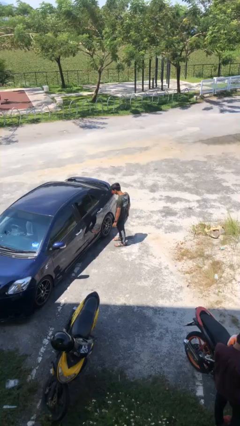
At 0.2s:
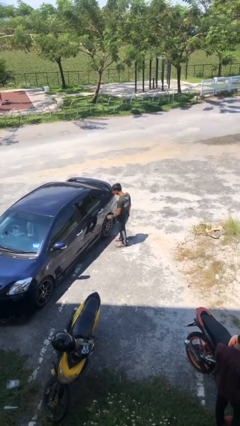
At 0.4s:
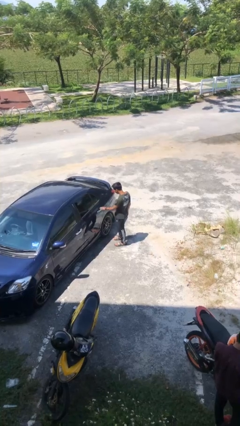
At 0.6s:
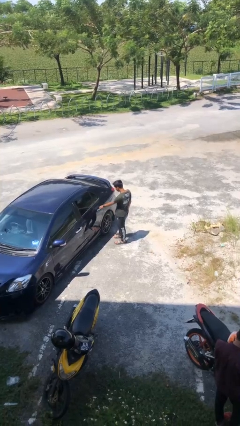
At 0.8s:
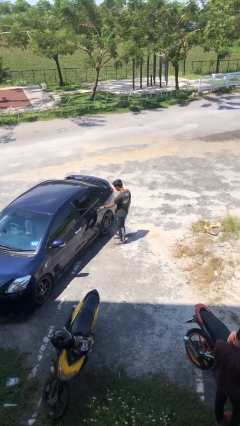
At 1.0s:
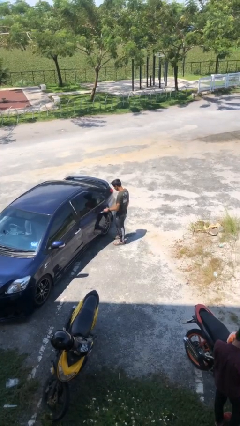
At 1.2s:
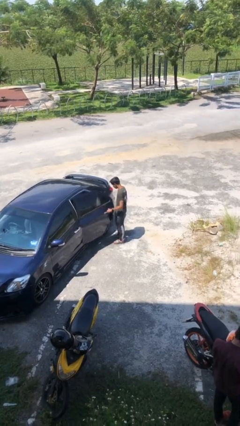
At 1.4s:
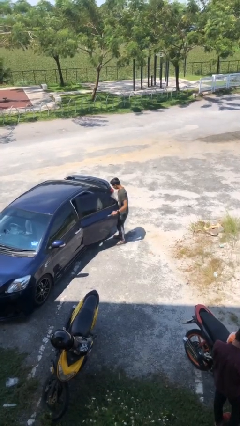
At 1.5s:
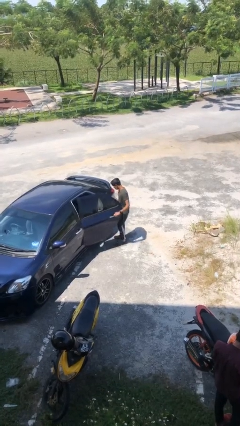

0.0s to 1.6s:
person opens car door

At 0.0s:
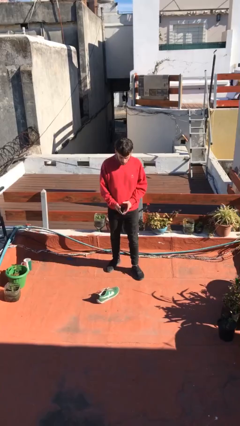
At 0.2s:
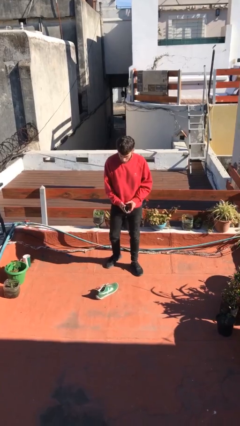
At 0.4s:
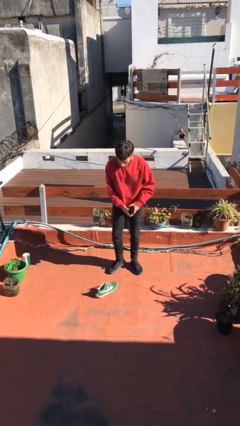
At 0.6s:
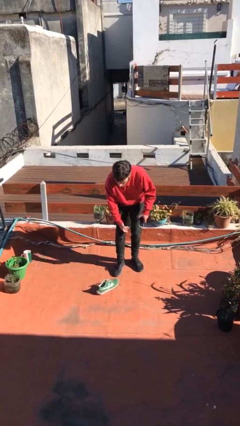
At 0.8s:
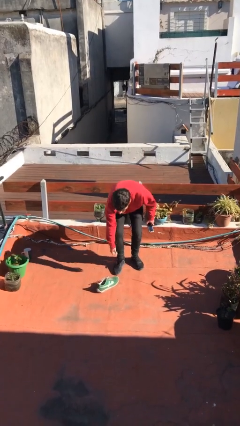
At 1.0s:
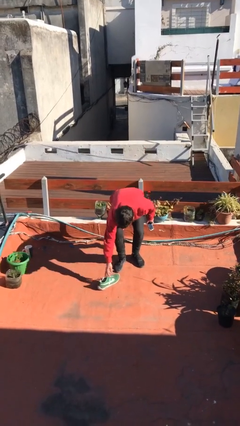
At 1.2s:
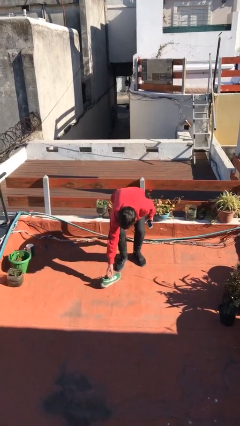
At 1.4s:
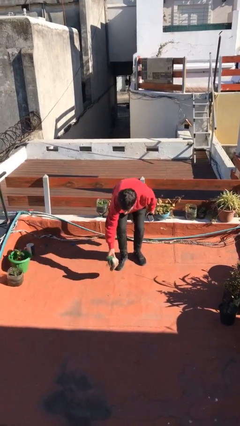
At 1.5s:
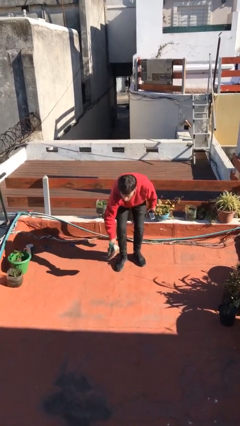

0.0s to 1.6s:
person picks up object from floor

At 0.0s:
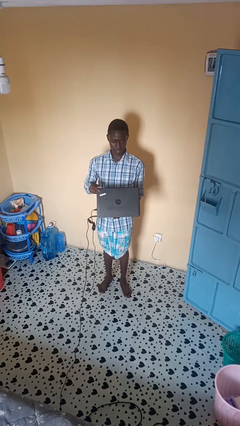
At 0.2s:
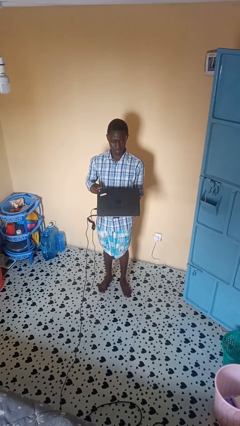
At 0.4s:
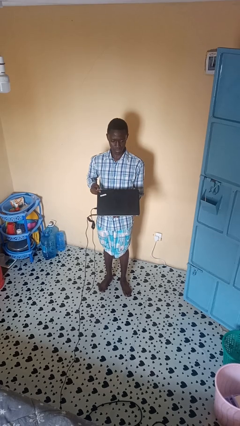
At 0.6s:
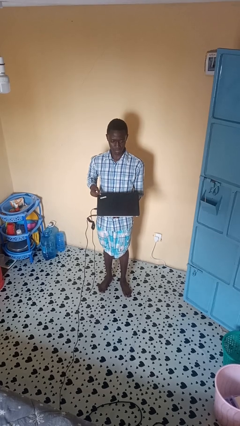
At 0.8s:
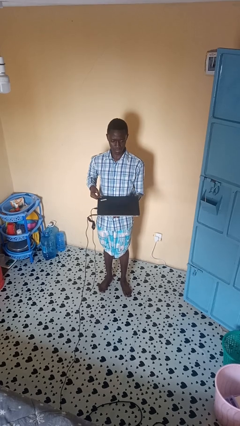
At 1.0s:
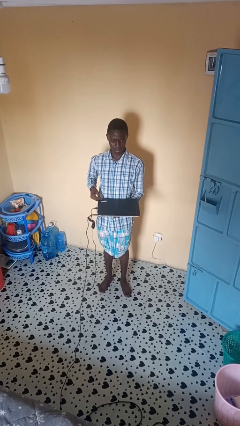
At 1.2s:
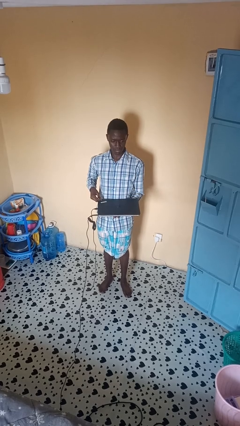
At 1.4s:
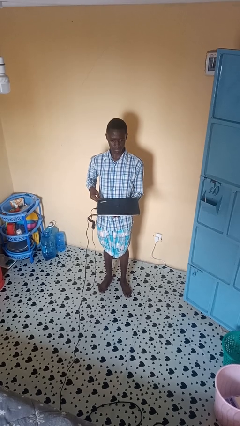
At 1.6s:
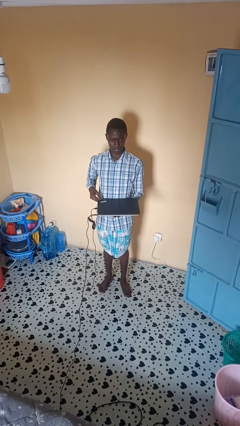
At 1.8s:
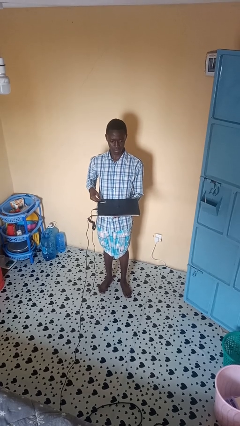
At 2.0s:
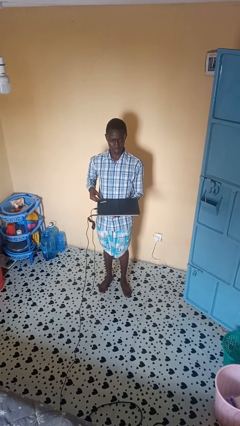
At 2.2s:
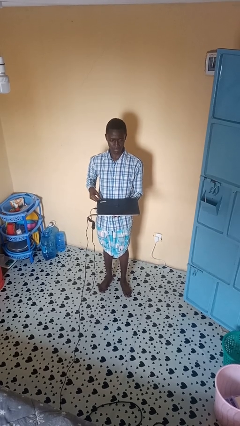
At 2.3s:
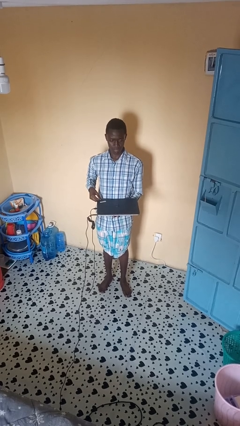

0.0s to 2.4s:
person closes laptop

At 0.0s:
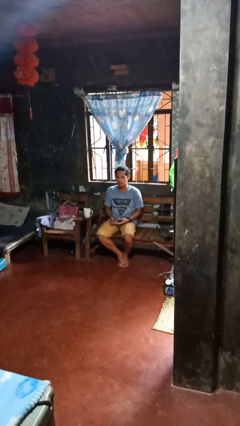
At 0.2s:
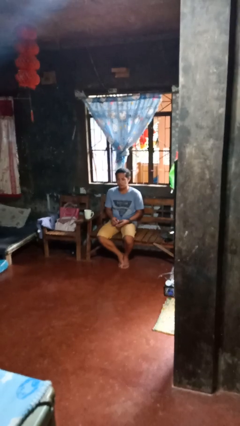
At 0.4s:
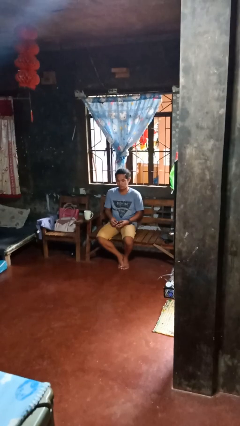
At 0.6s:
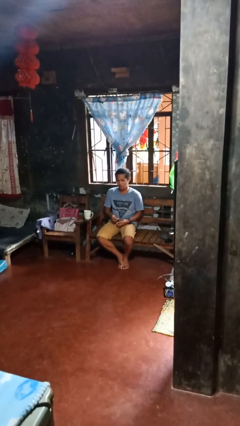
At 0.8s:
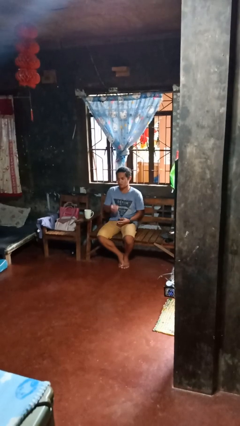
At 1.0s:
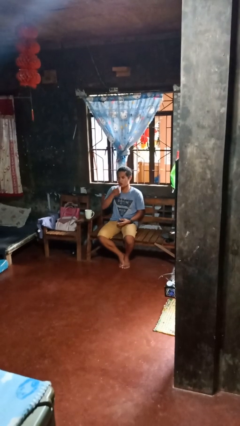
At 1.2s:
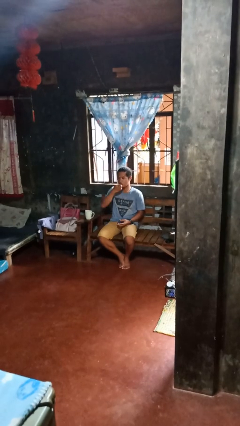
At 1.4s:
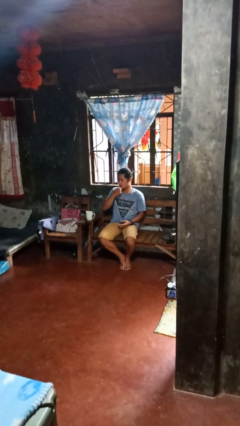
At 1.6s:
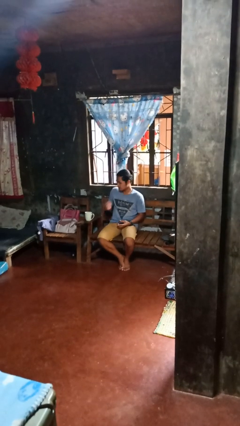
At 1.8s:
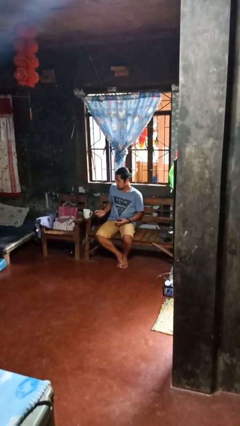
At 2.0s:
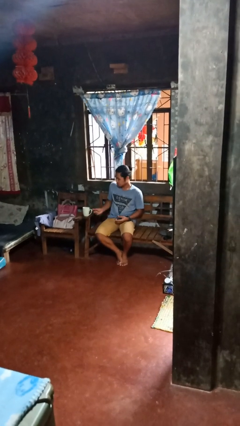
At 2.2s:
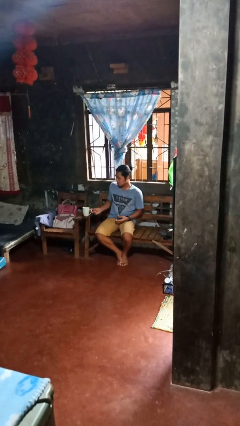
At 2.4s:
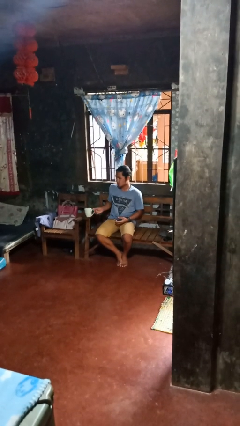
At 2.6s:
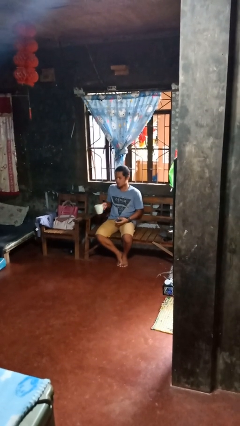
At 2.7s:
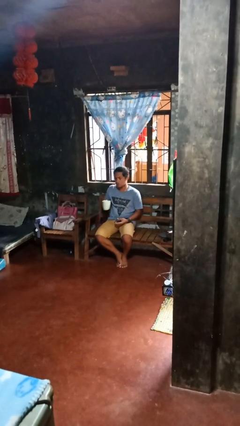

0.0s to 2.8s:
person takes medicine pills

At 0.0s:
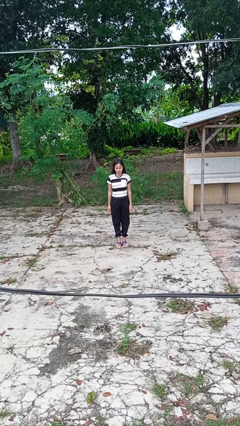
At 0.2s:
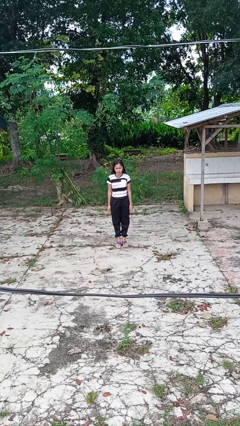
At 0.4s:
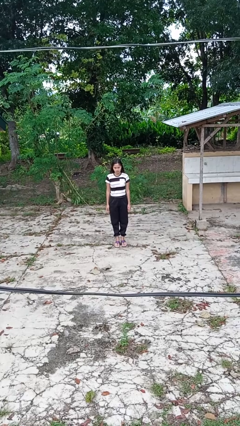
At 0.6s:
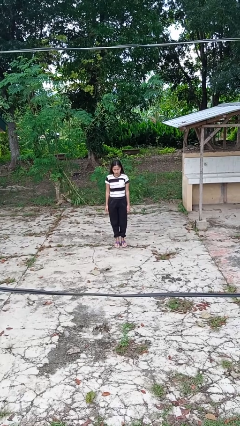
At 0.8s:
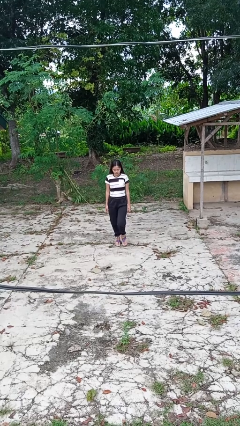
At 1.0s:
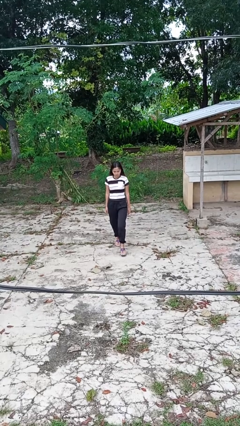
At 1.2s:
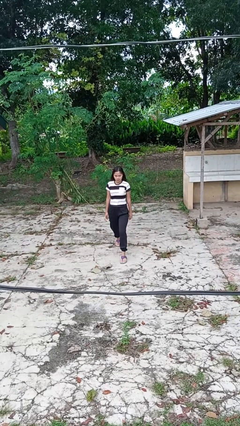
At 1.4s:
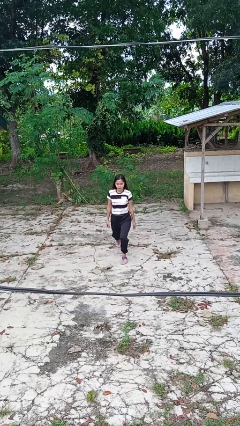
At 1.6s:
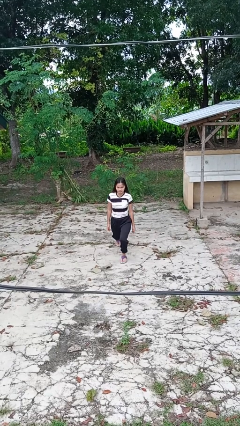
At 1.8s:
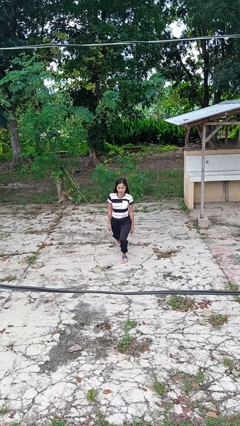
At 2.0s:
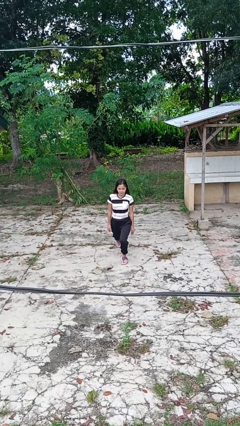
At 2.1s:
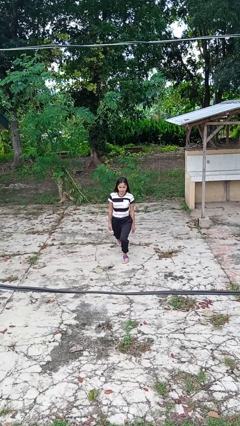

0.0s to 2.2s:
person exercises with lunges

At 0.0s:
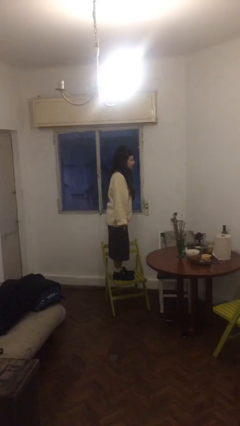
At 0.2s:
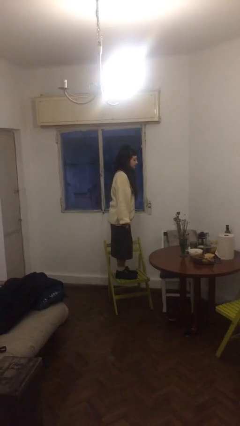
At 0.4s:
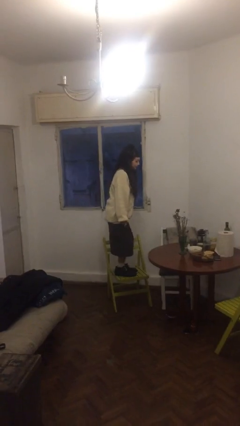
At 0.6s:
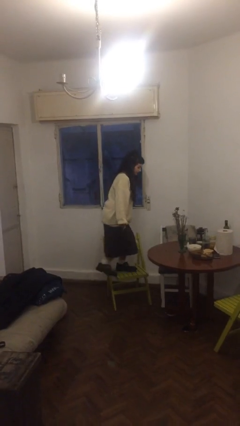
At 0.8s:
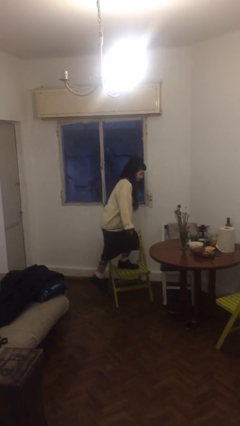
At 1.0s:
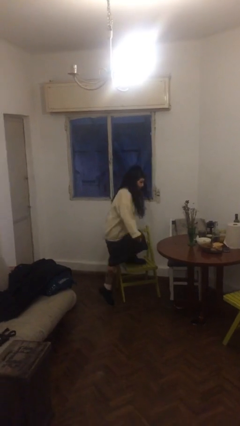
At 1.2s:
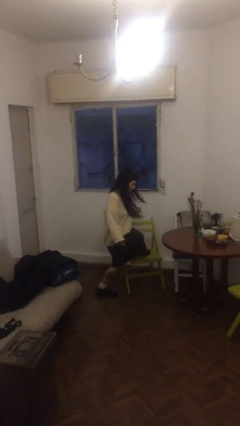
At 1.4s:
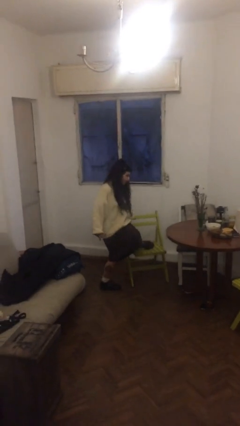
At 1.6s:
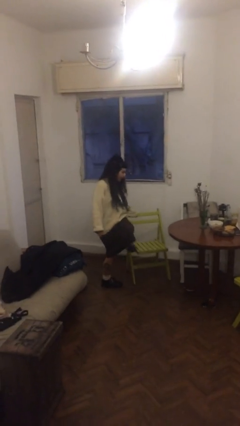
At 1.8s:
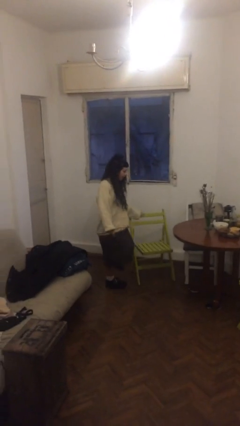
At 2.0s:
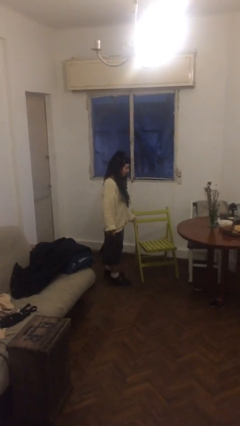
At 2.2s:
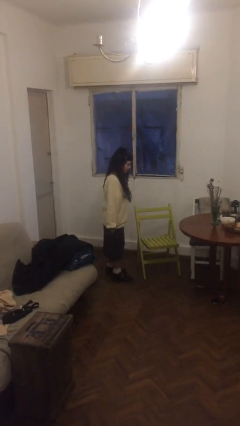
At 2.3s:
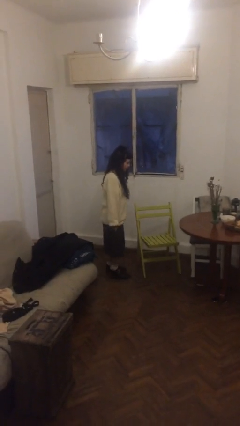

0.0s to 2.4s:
person climbs off chair

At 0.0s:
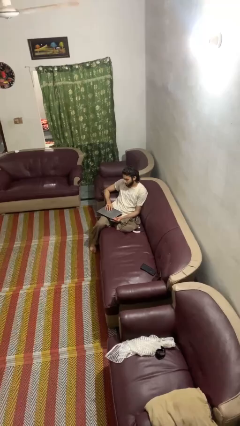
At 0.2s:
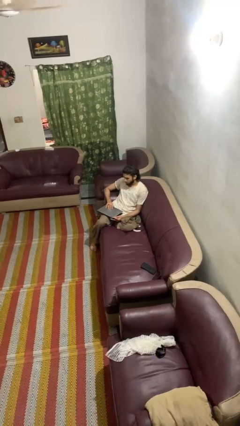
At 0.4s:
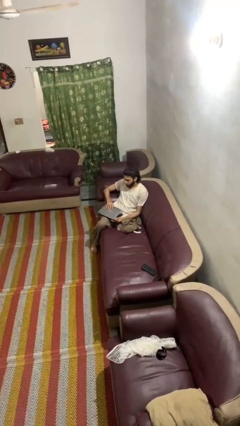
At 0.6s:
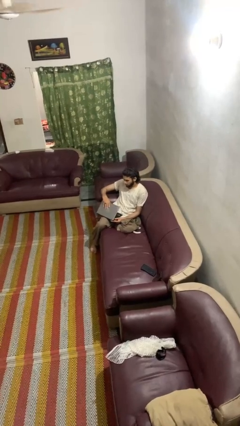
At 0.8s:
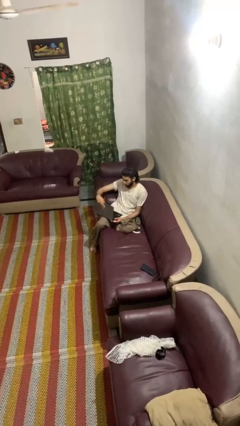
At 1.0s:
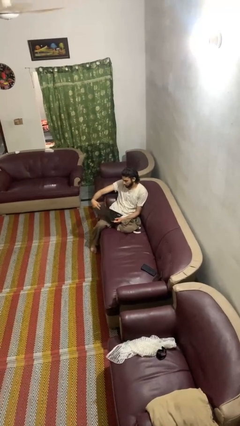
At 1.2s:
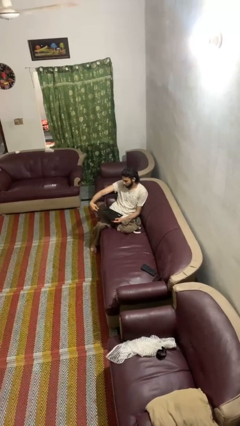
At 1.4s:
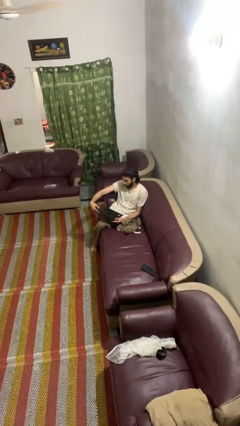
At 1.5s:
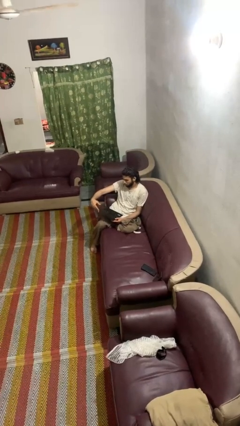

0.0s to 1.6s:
person opens laptop

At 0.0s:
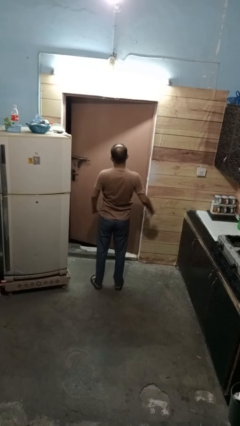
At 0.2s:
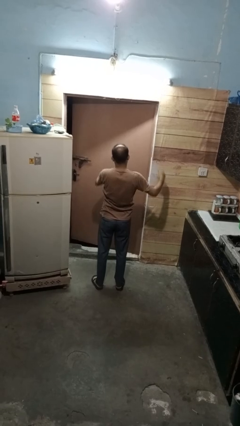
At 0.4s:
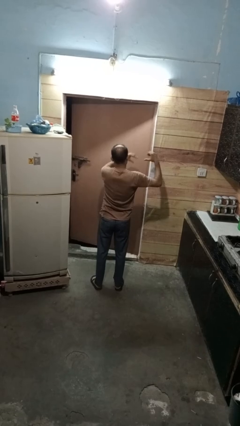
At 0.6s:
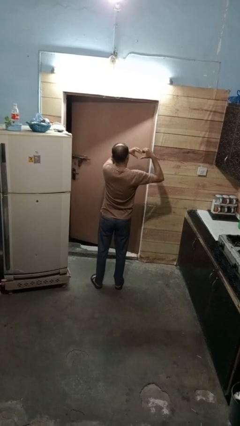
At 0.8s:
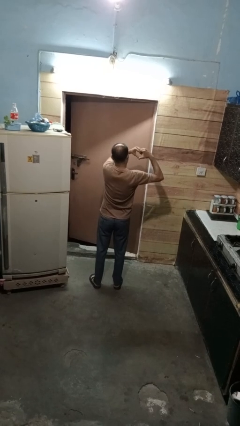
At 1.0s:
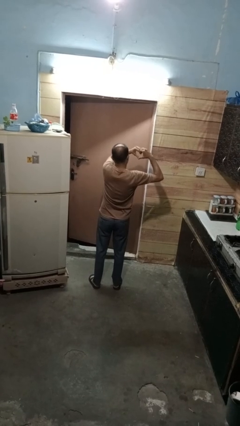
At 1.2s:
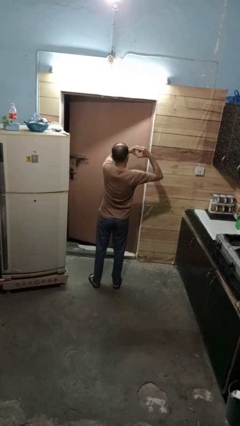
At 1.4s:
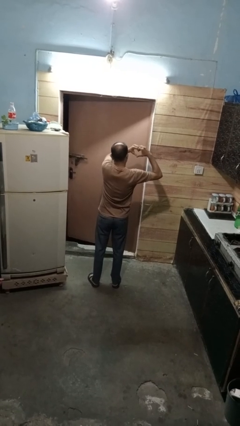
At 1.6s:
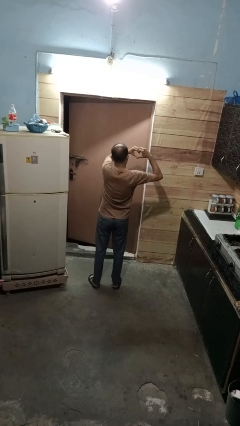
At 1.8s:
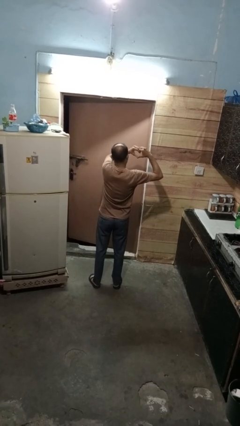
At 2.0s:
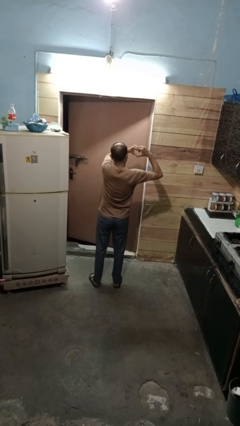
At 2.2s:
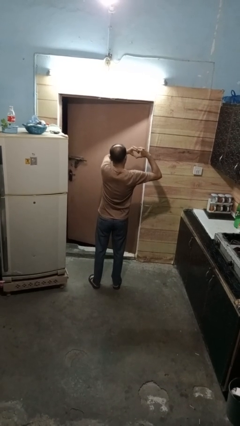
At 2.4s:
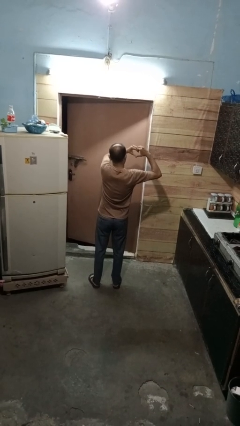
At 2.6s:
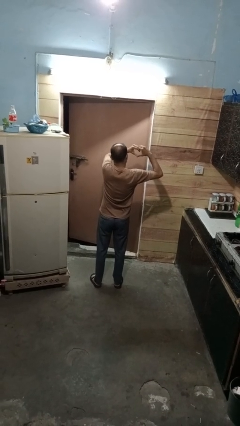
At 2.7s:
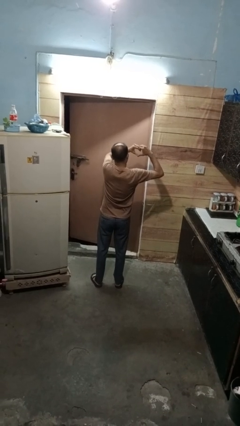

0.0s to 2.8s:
person gestures heart
